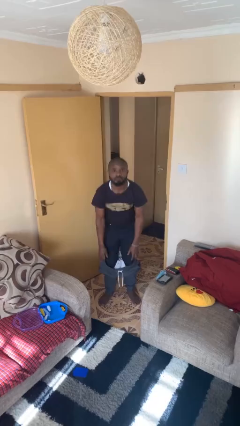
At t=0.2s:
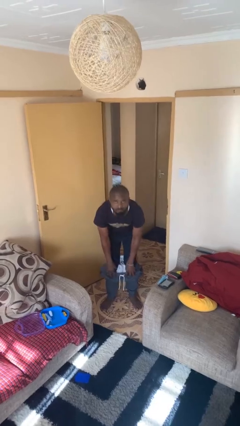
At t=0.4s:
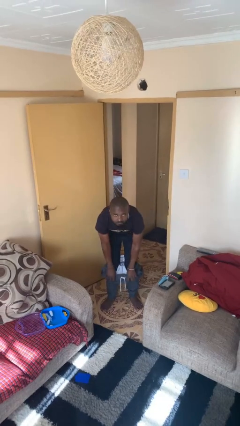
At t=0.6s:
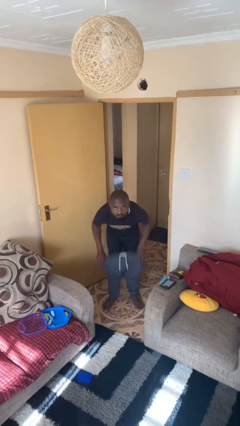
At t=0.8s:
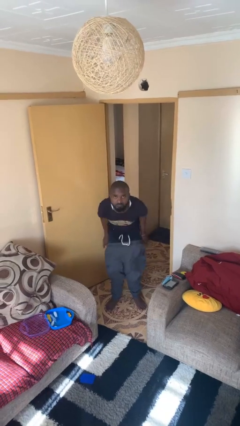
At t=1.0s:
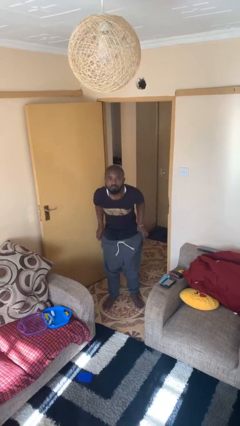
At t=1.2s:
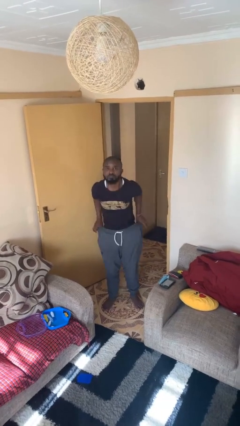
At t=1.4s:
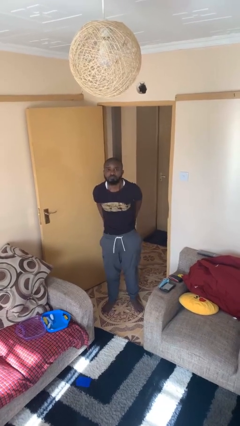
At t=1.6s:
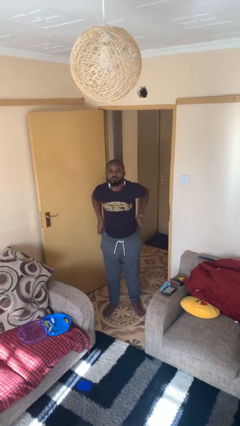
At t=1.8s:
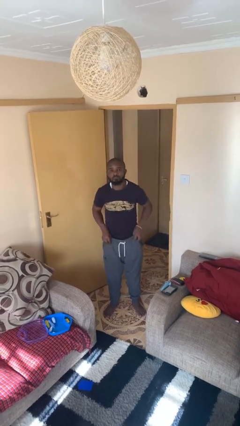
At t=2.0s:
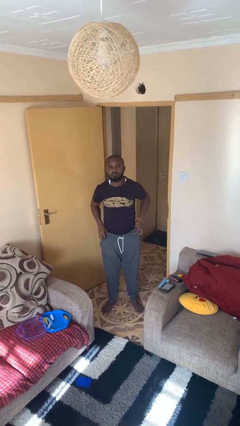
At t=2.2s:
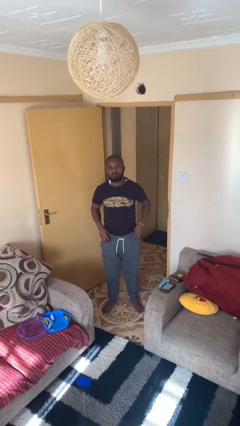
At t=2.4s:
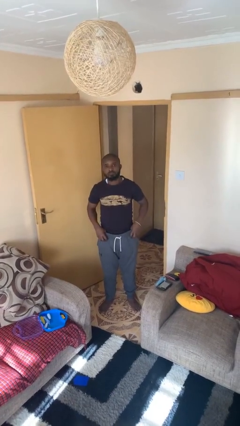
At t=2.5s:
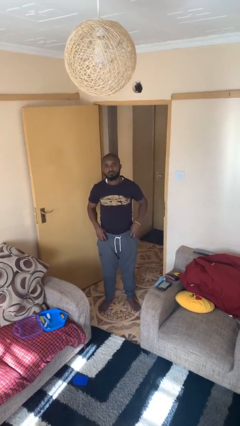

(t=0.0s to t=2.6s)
person puts on pants

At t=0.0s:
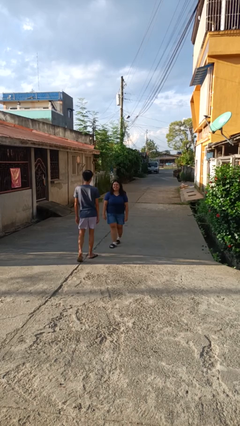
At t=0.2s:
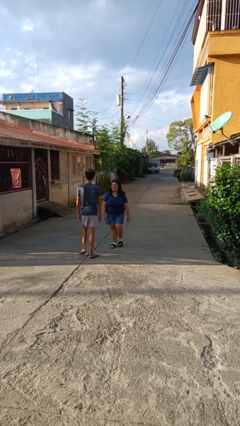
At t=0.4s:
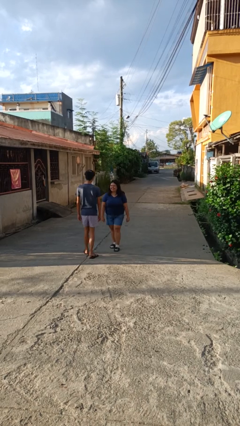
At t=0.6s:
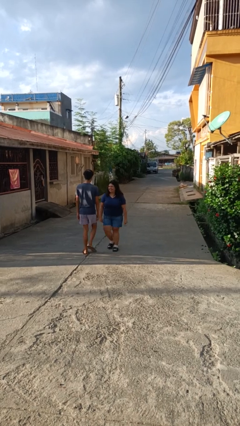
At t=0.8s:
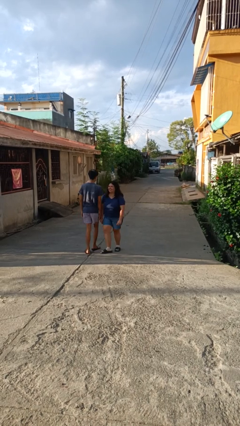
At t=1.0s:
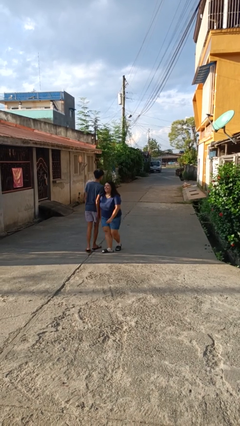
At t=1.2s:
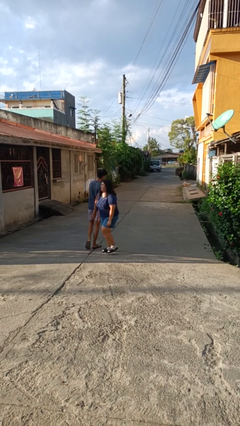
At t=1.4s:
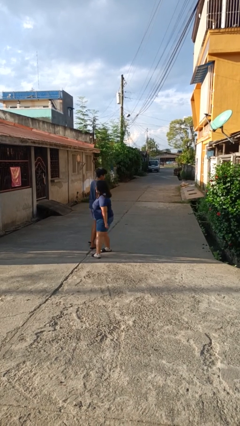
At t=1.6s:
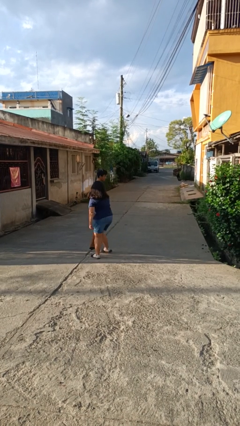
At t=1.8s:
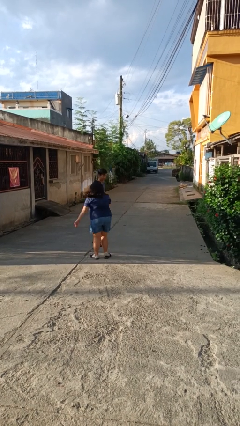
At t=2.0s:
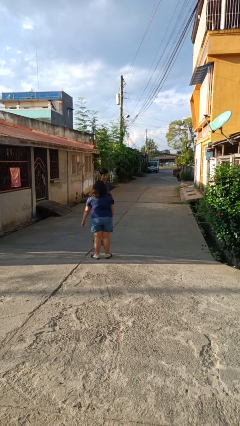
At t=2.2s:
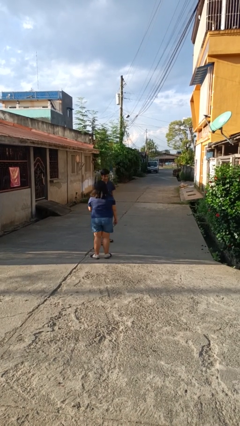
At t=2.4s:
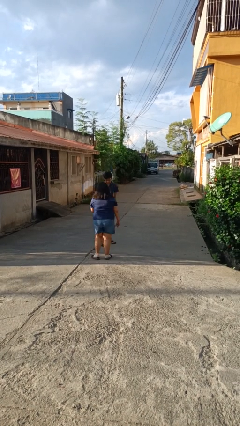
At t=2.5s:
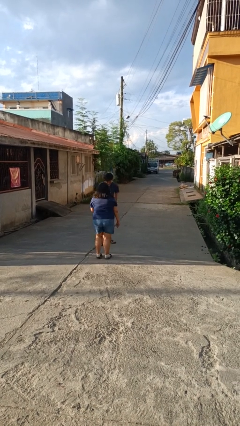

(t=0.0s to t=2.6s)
person bumps into person

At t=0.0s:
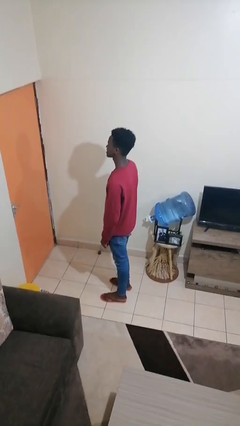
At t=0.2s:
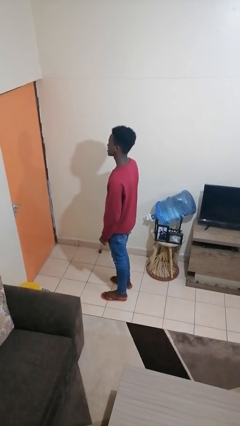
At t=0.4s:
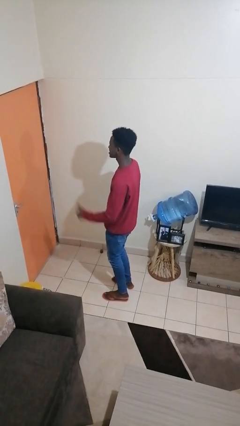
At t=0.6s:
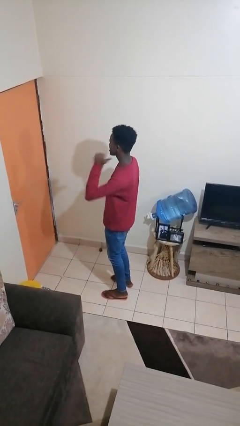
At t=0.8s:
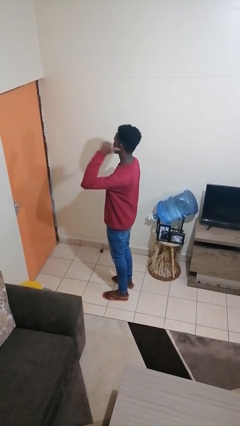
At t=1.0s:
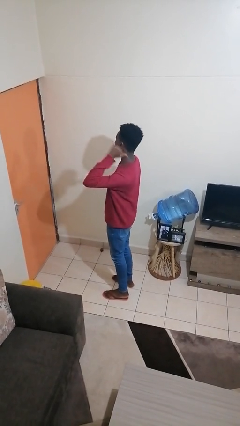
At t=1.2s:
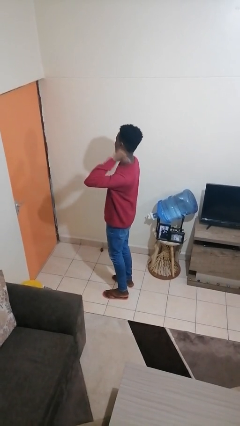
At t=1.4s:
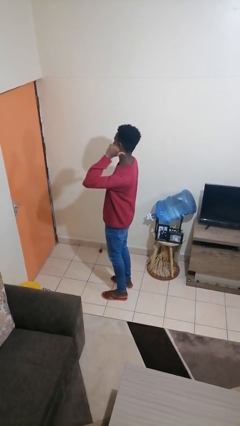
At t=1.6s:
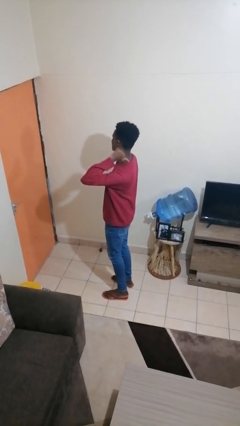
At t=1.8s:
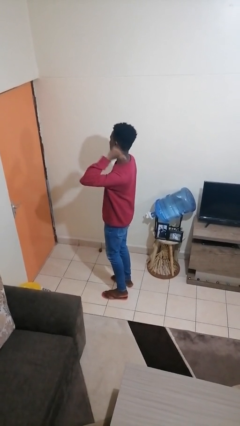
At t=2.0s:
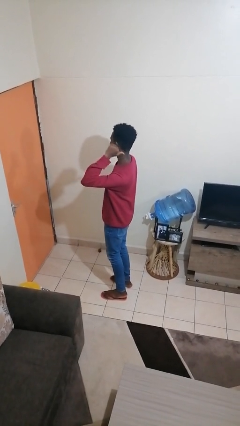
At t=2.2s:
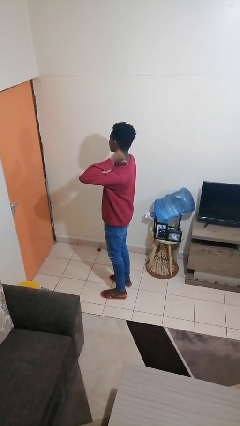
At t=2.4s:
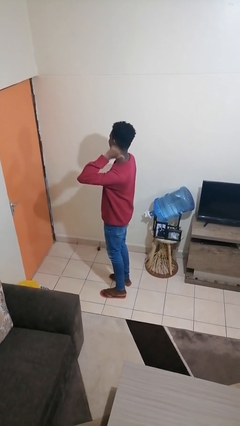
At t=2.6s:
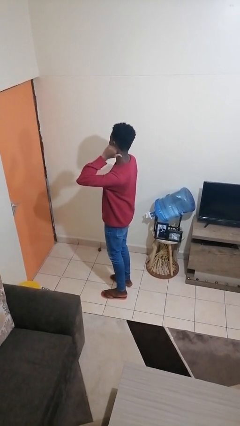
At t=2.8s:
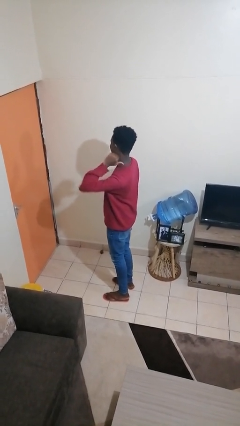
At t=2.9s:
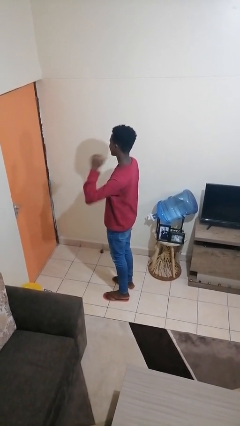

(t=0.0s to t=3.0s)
person gestures behind me

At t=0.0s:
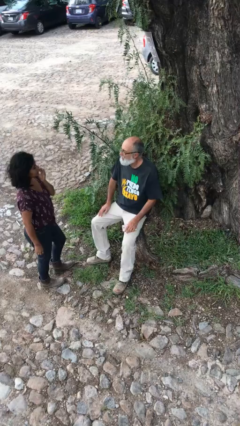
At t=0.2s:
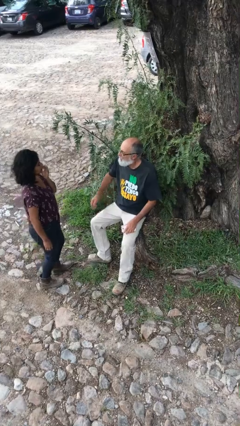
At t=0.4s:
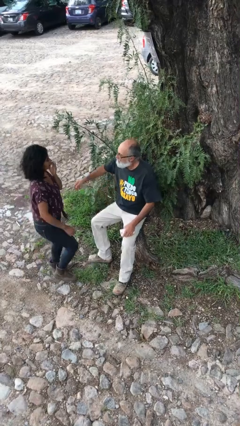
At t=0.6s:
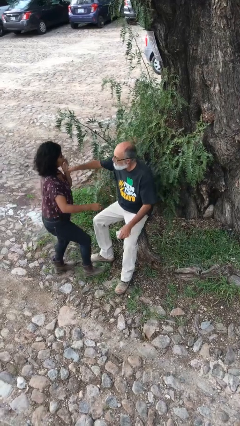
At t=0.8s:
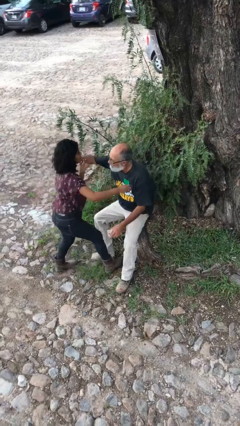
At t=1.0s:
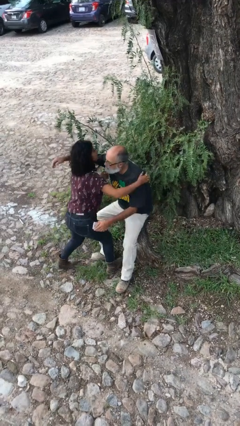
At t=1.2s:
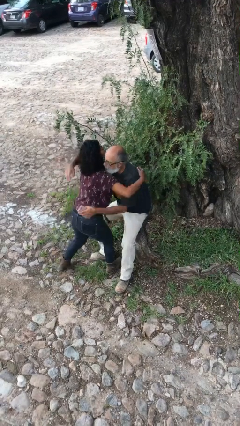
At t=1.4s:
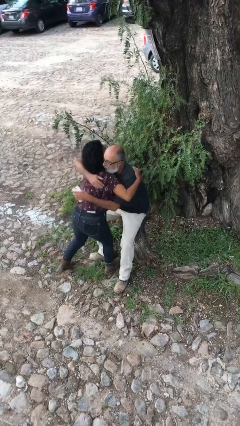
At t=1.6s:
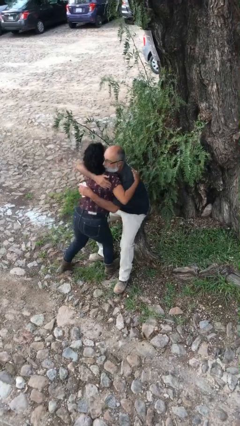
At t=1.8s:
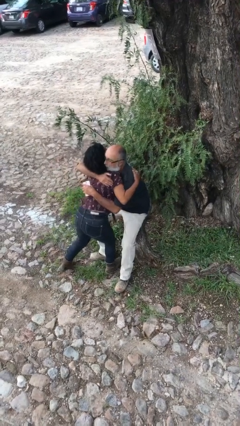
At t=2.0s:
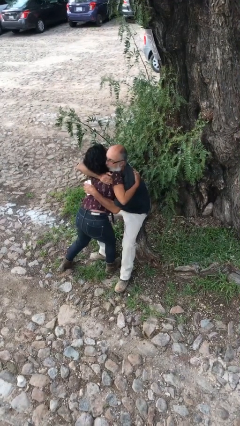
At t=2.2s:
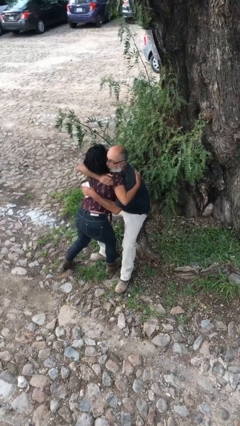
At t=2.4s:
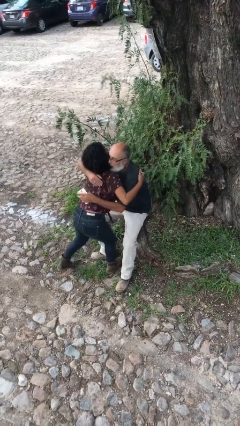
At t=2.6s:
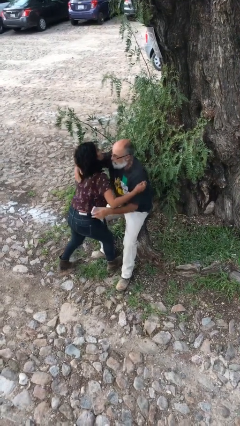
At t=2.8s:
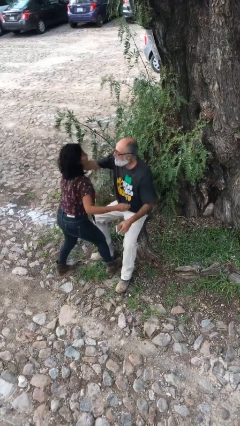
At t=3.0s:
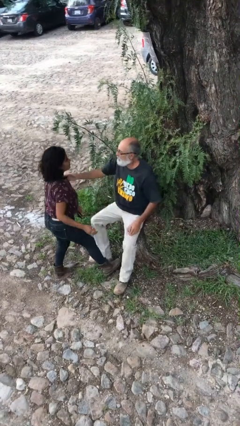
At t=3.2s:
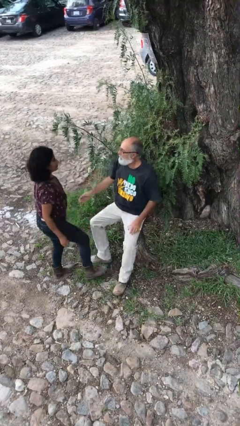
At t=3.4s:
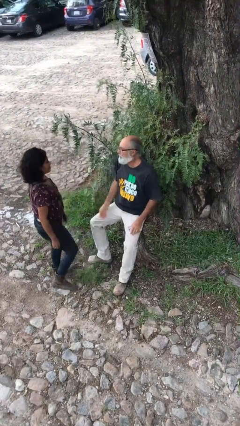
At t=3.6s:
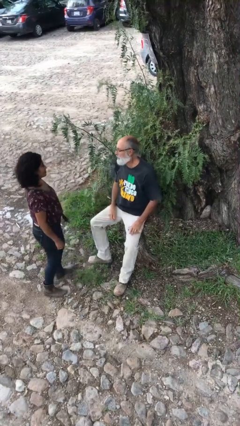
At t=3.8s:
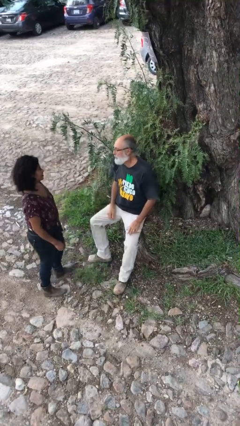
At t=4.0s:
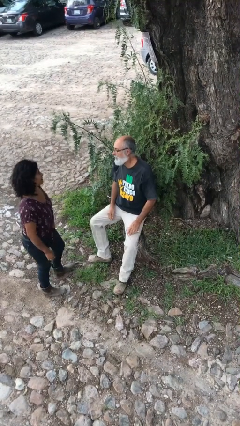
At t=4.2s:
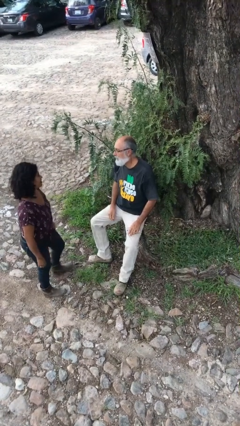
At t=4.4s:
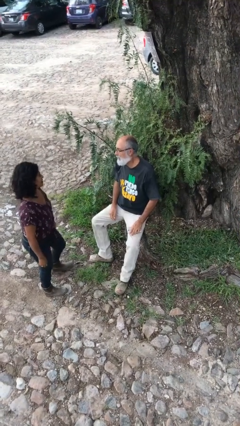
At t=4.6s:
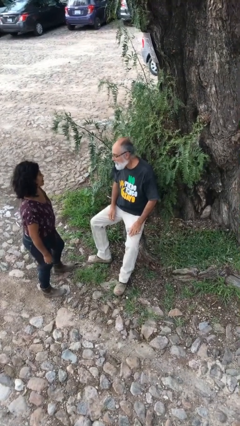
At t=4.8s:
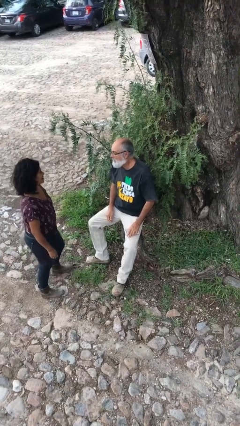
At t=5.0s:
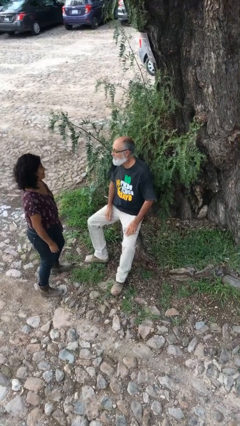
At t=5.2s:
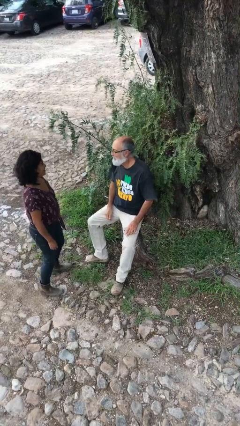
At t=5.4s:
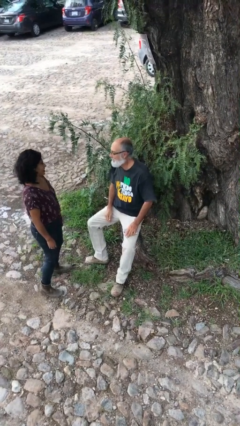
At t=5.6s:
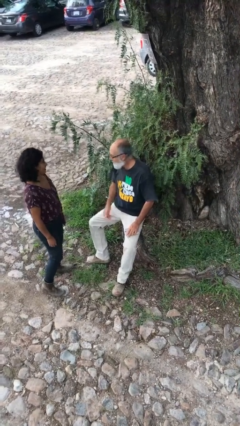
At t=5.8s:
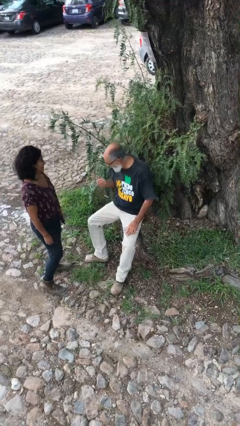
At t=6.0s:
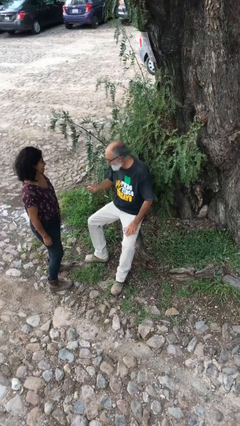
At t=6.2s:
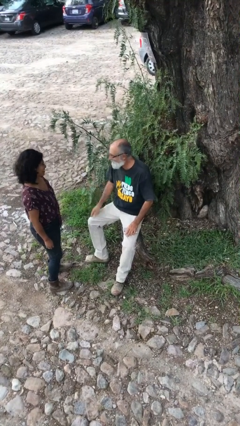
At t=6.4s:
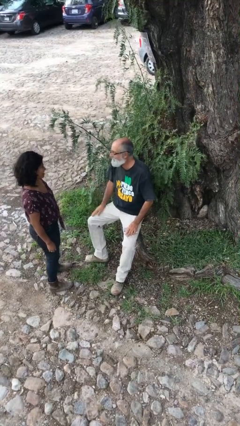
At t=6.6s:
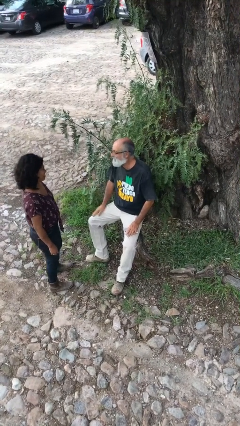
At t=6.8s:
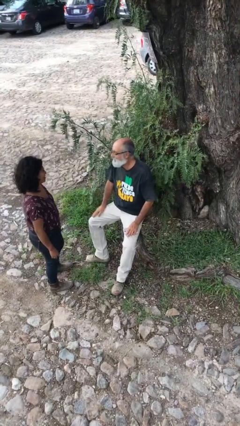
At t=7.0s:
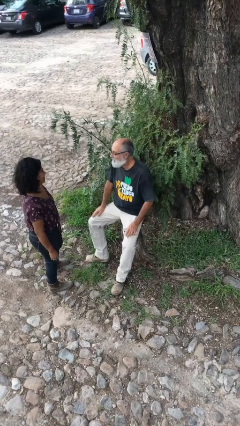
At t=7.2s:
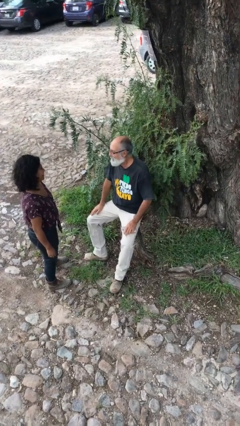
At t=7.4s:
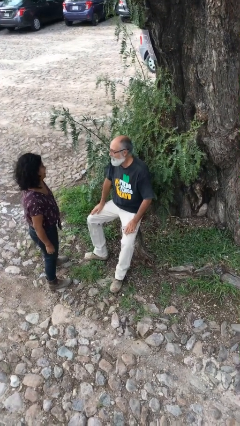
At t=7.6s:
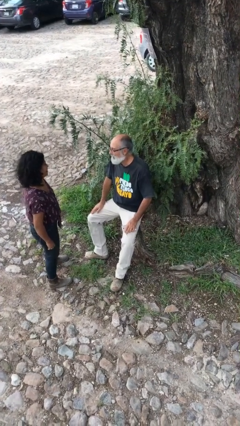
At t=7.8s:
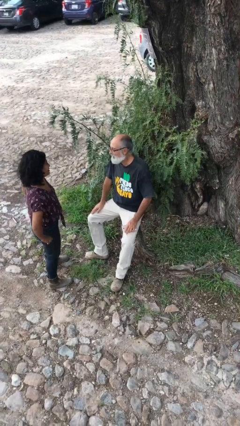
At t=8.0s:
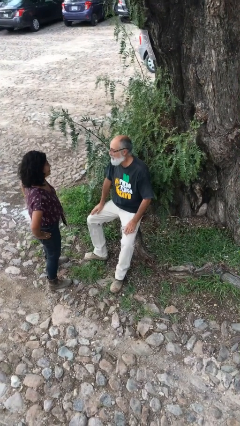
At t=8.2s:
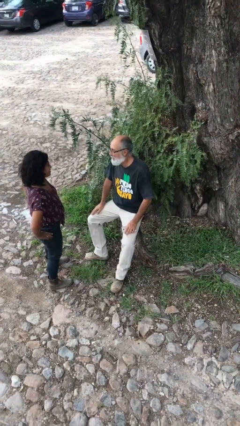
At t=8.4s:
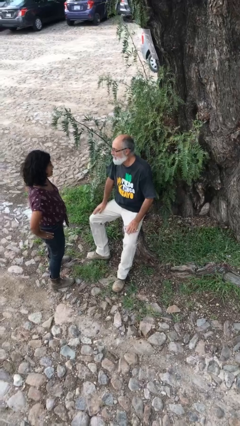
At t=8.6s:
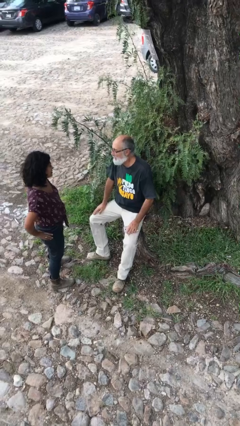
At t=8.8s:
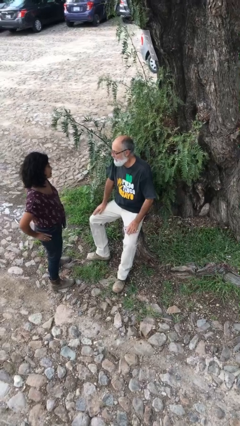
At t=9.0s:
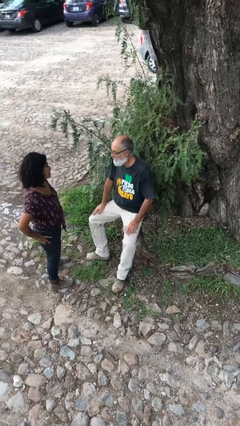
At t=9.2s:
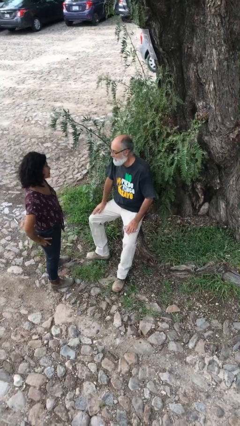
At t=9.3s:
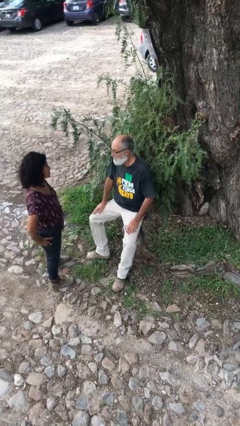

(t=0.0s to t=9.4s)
person embraces person

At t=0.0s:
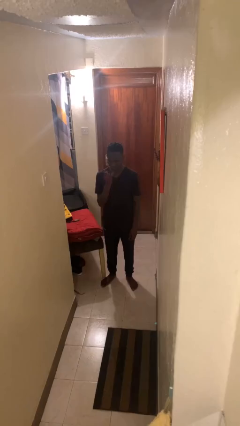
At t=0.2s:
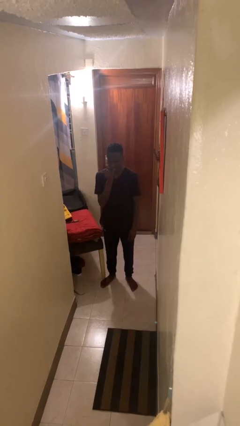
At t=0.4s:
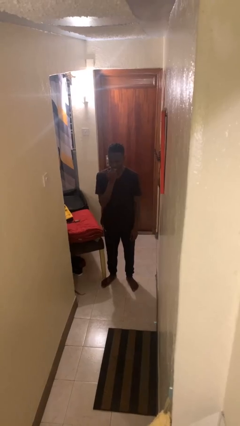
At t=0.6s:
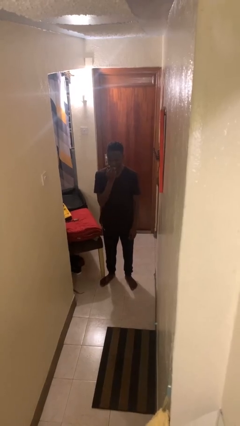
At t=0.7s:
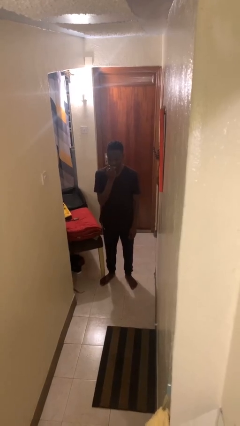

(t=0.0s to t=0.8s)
person licks fingers
